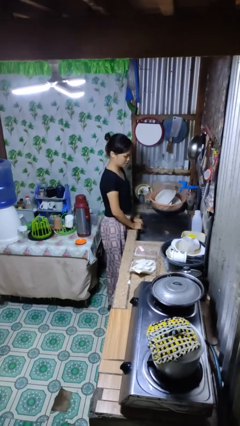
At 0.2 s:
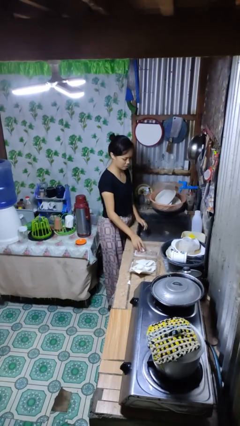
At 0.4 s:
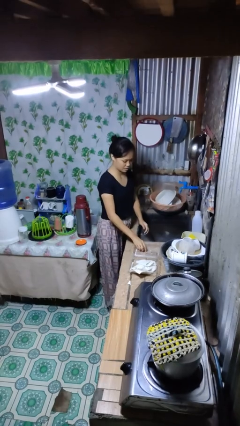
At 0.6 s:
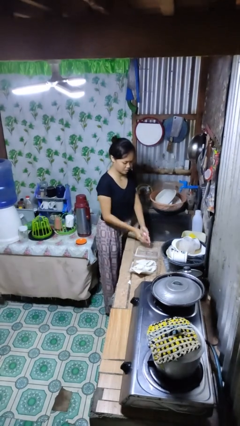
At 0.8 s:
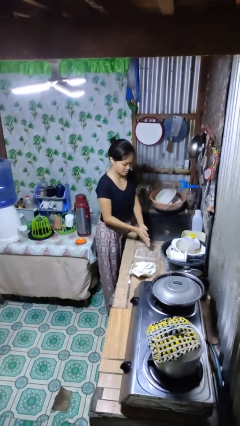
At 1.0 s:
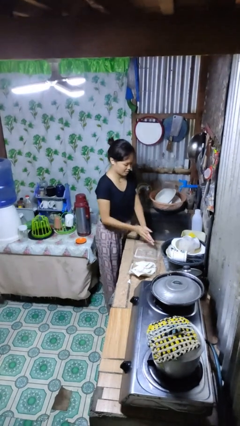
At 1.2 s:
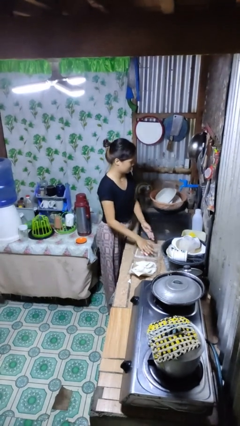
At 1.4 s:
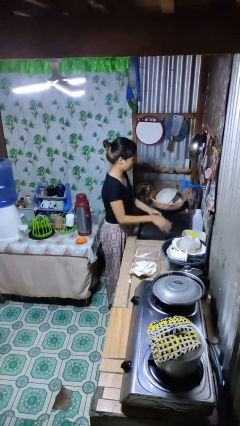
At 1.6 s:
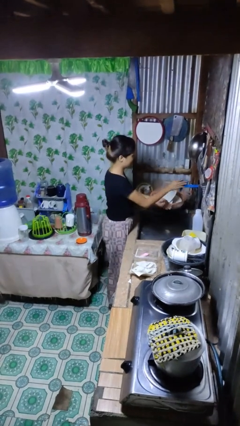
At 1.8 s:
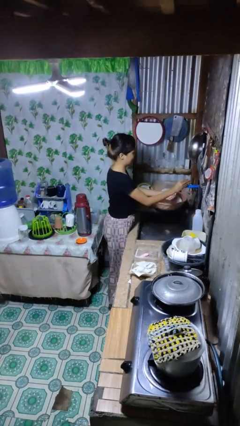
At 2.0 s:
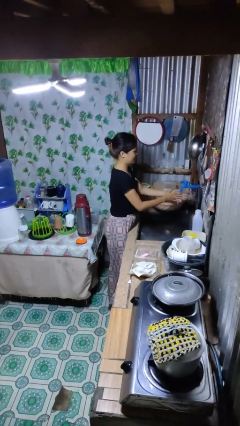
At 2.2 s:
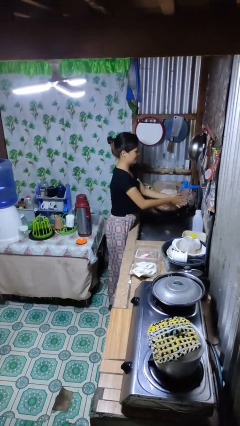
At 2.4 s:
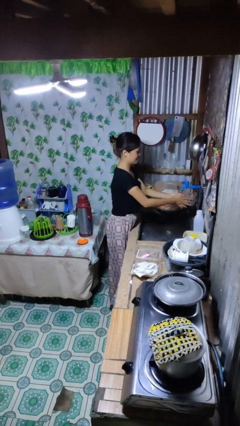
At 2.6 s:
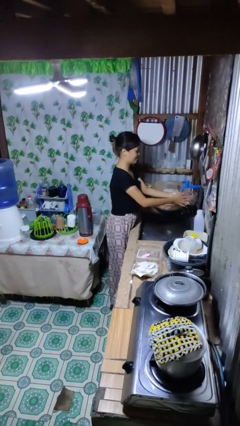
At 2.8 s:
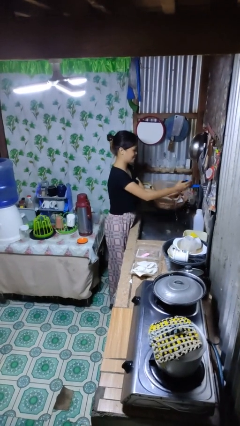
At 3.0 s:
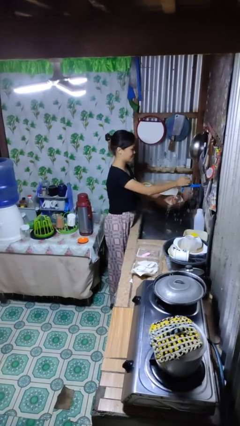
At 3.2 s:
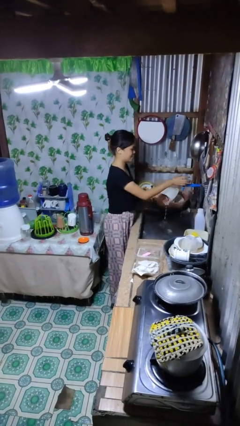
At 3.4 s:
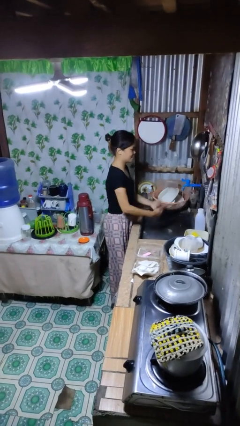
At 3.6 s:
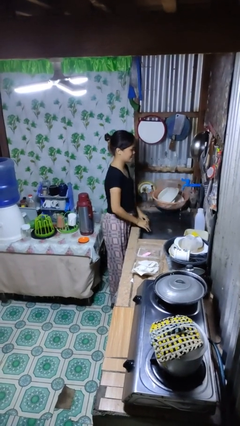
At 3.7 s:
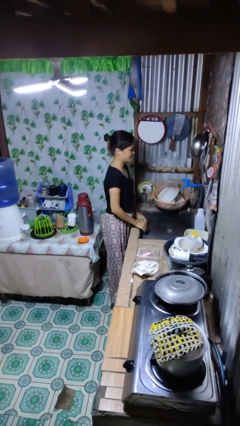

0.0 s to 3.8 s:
person washes hands

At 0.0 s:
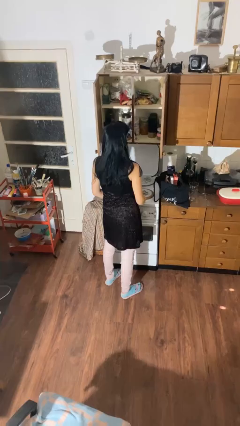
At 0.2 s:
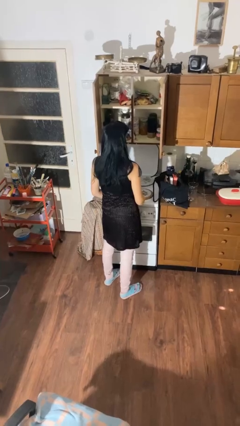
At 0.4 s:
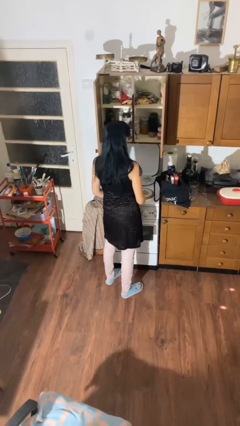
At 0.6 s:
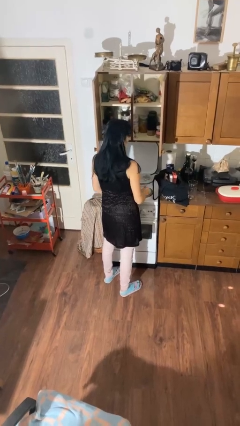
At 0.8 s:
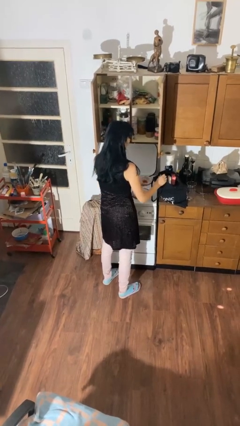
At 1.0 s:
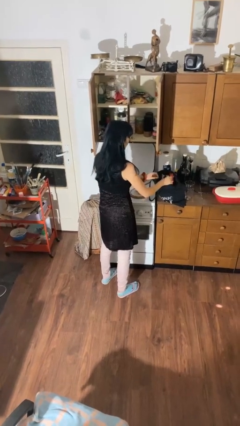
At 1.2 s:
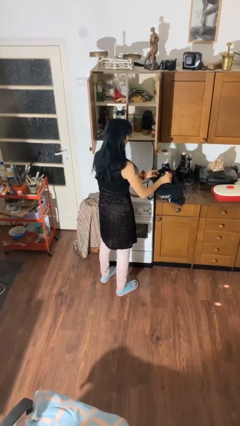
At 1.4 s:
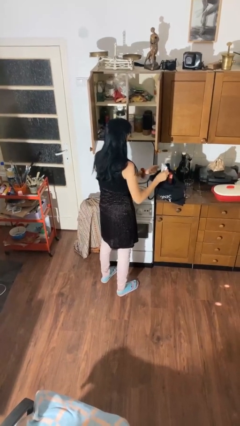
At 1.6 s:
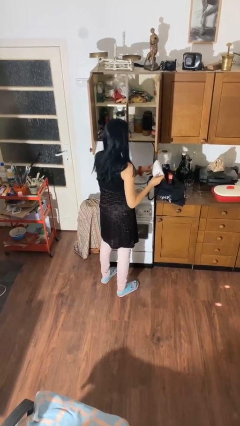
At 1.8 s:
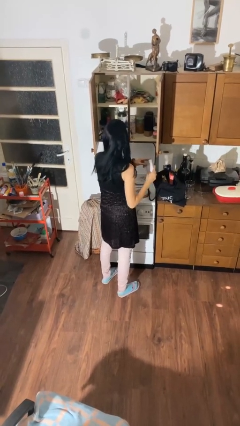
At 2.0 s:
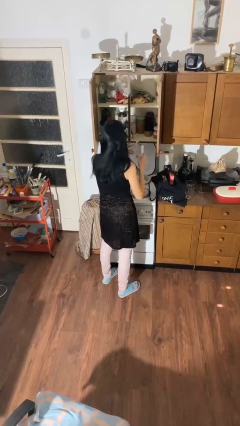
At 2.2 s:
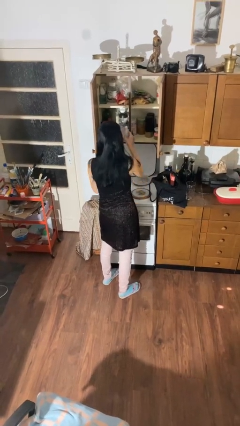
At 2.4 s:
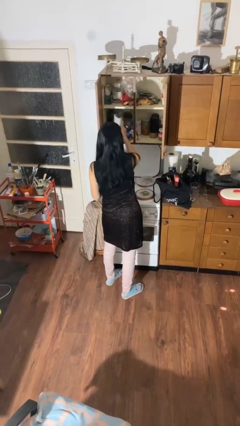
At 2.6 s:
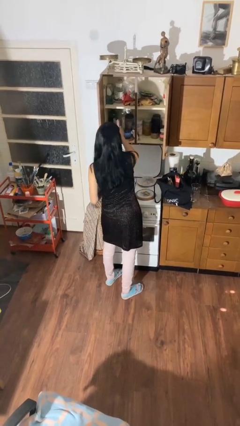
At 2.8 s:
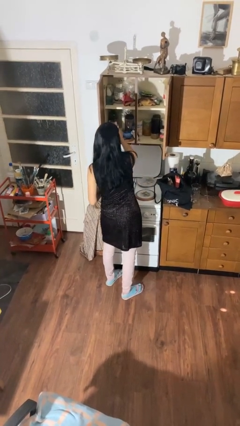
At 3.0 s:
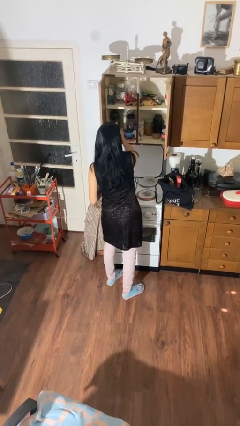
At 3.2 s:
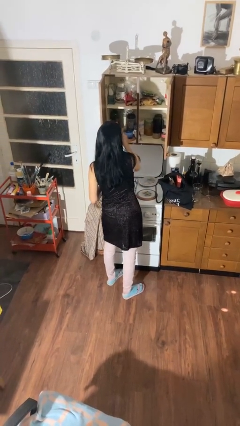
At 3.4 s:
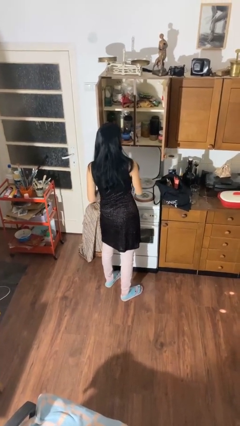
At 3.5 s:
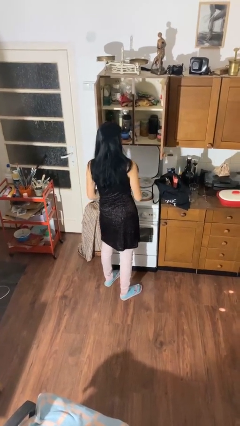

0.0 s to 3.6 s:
person loads groceries into cabinet

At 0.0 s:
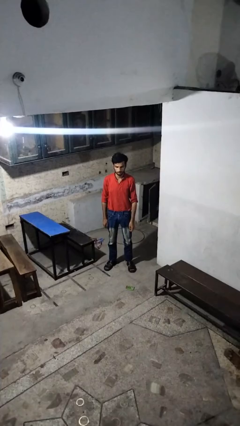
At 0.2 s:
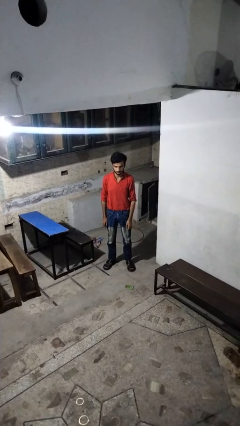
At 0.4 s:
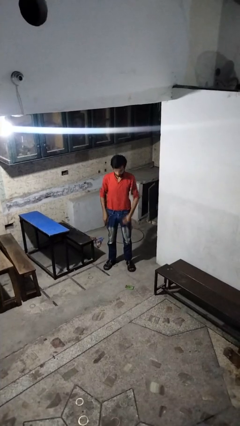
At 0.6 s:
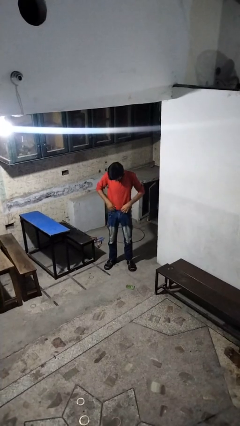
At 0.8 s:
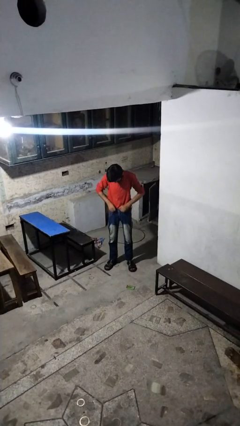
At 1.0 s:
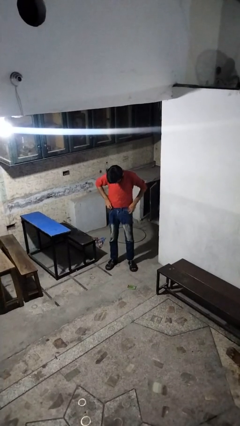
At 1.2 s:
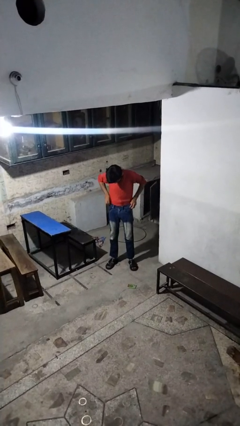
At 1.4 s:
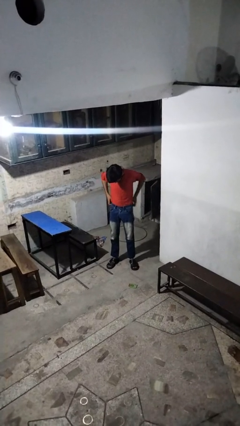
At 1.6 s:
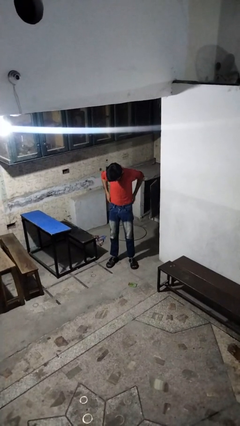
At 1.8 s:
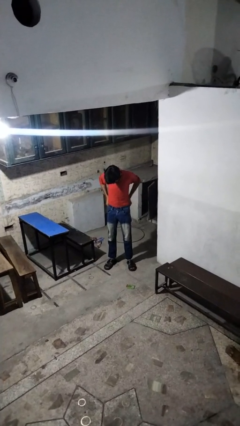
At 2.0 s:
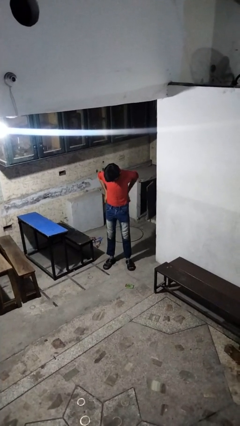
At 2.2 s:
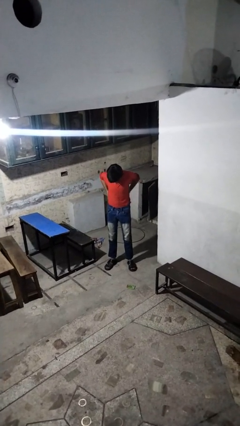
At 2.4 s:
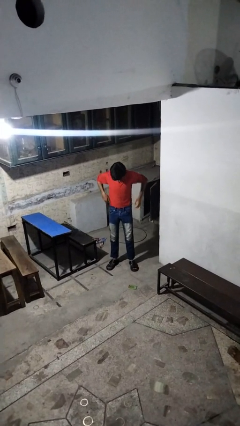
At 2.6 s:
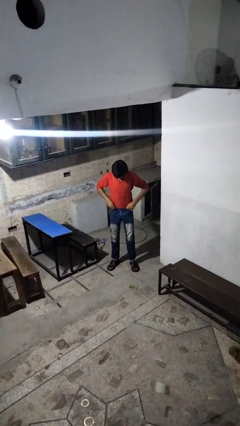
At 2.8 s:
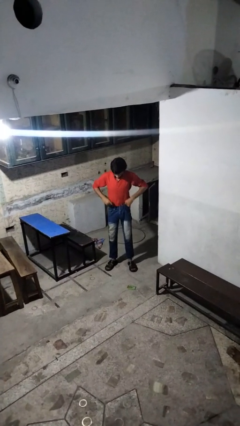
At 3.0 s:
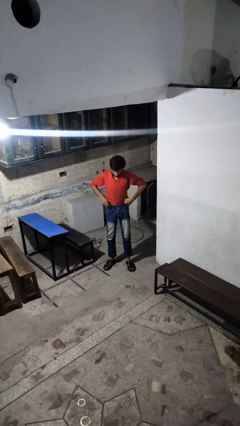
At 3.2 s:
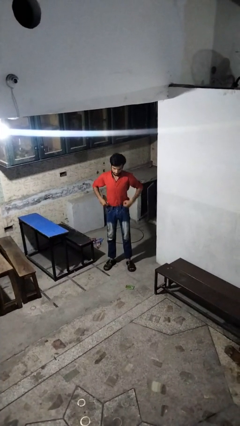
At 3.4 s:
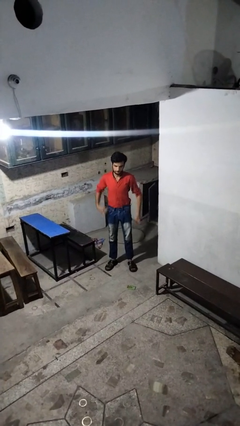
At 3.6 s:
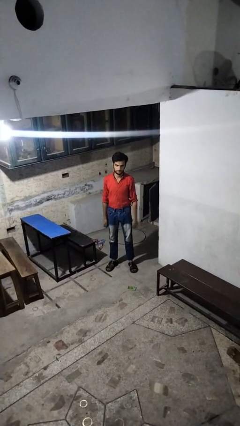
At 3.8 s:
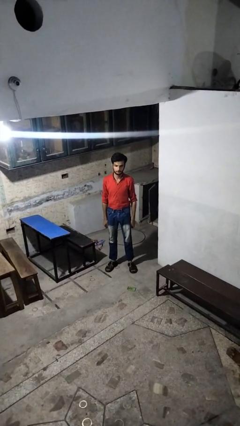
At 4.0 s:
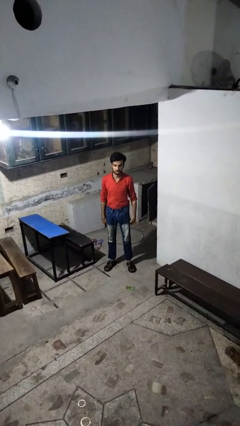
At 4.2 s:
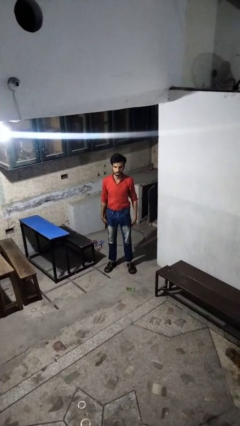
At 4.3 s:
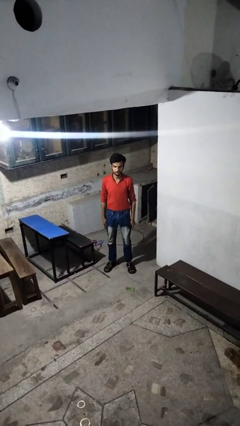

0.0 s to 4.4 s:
person hikes up pants

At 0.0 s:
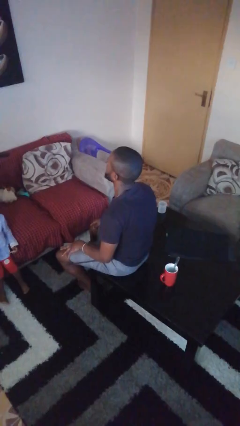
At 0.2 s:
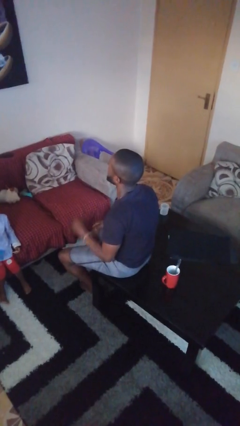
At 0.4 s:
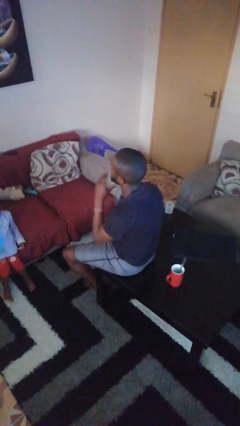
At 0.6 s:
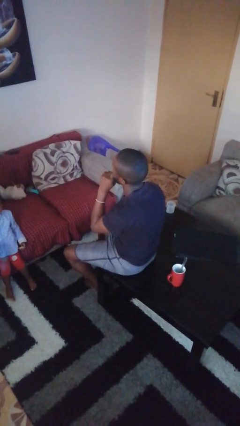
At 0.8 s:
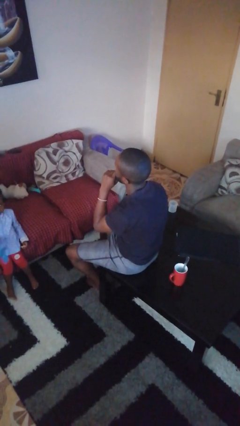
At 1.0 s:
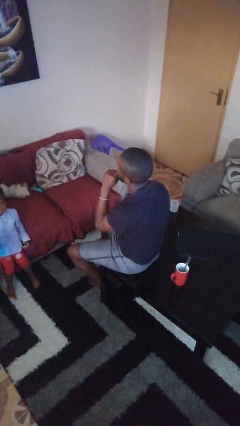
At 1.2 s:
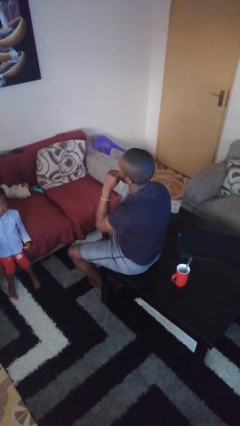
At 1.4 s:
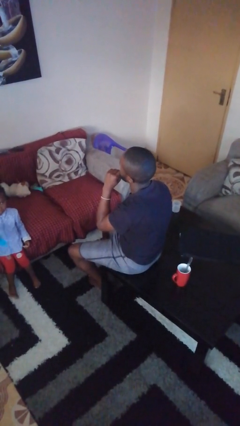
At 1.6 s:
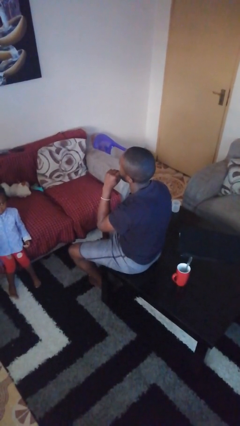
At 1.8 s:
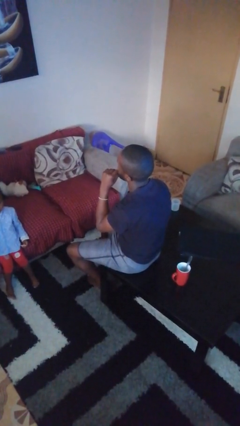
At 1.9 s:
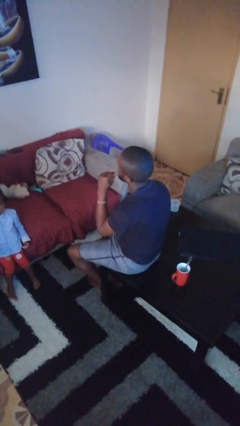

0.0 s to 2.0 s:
person strokes chin

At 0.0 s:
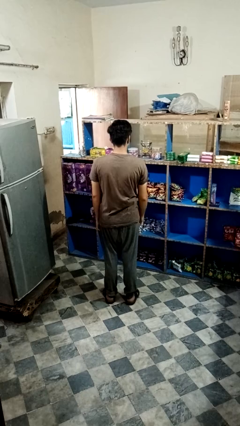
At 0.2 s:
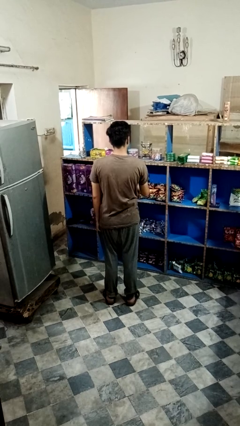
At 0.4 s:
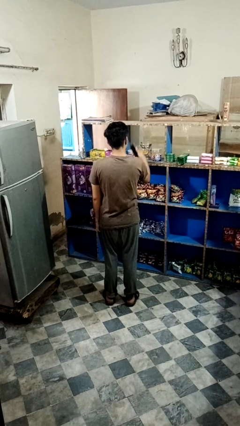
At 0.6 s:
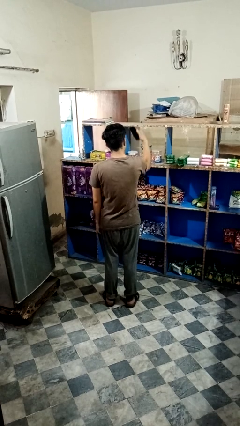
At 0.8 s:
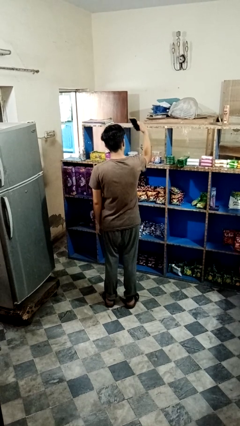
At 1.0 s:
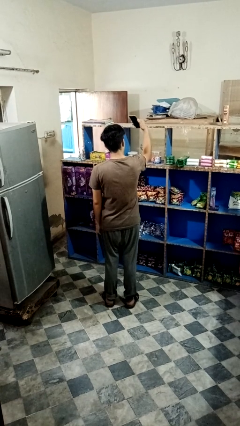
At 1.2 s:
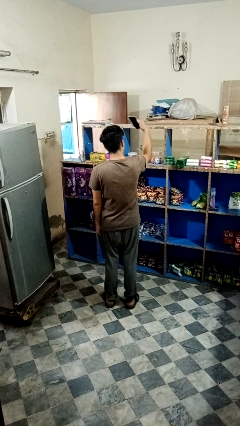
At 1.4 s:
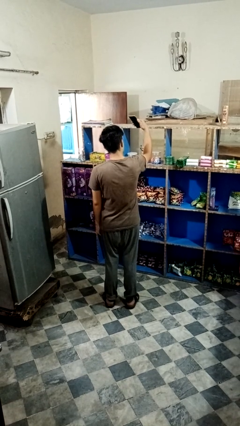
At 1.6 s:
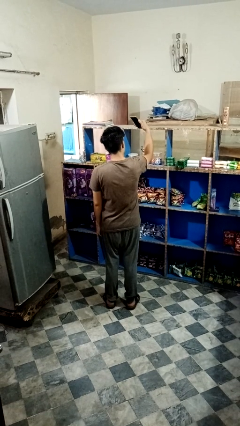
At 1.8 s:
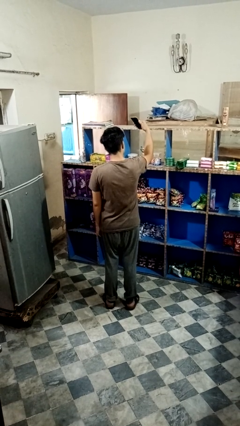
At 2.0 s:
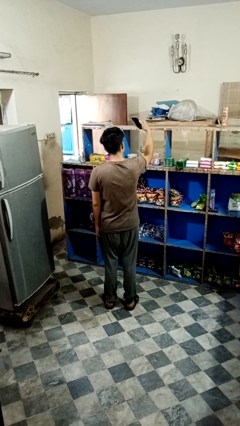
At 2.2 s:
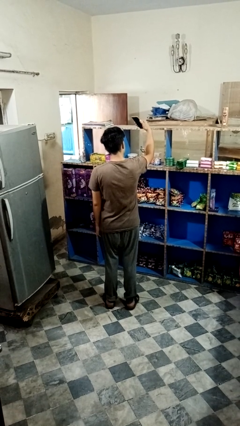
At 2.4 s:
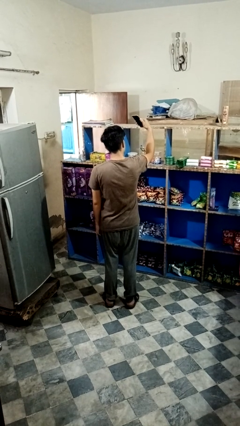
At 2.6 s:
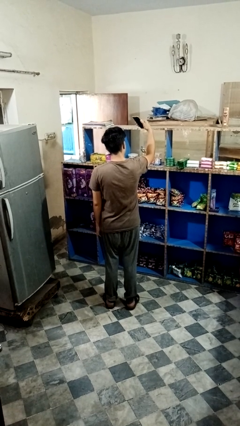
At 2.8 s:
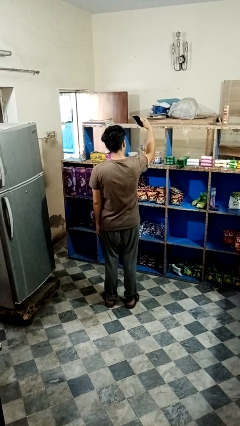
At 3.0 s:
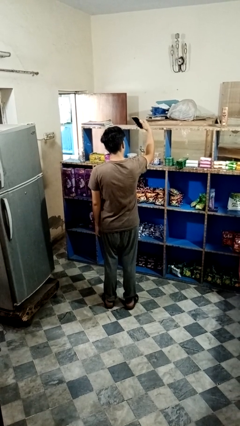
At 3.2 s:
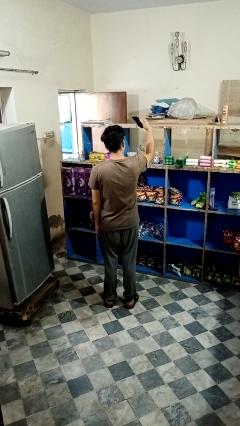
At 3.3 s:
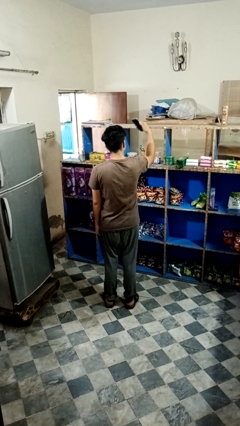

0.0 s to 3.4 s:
person takes selfie
